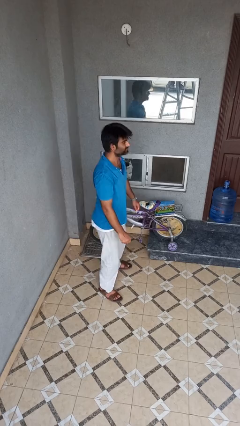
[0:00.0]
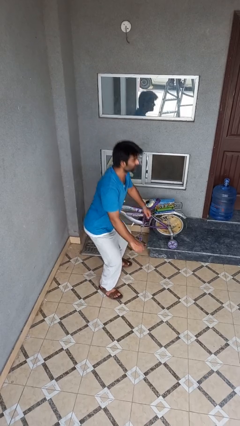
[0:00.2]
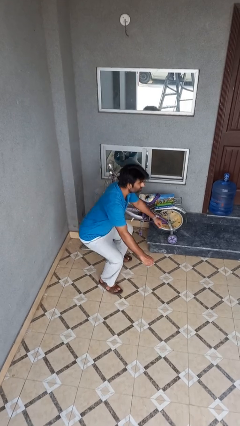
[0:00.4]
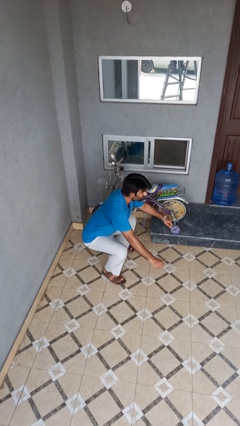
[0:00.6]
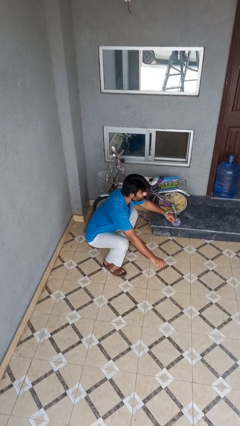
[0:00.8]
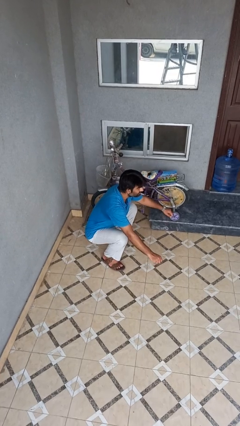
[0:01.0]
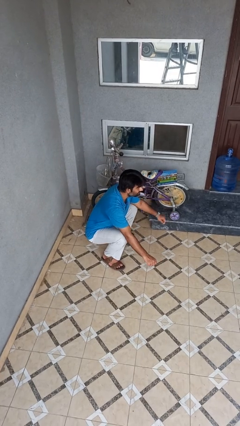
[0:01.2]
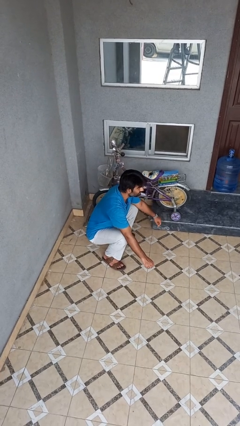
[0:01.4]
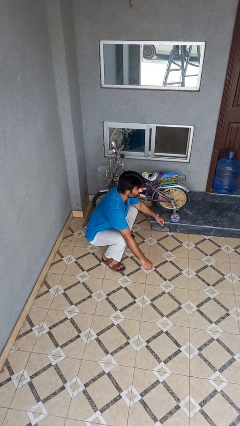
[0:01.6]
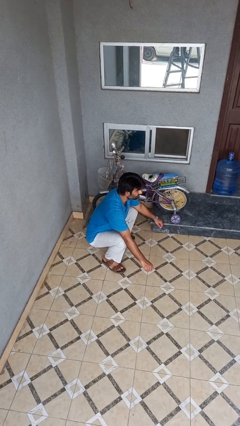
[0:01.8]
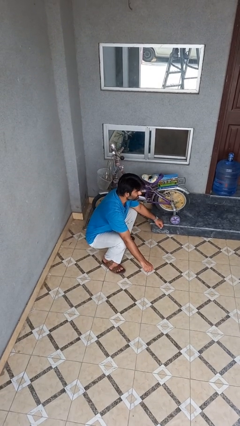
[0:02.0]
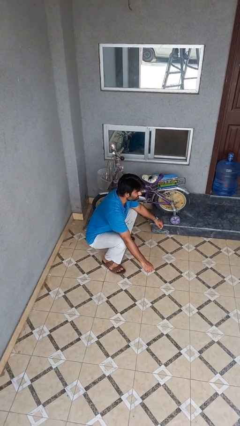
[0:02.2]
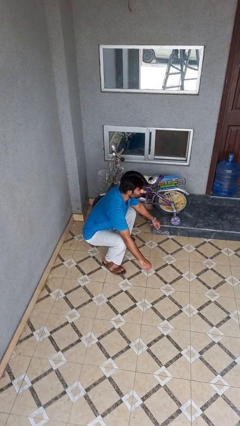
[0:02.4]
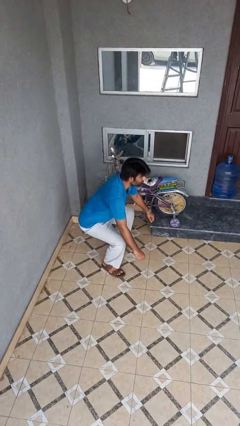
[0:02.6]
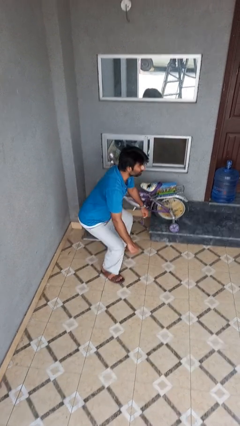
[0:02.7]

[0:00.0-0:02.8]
person squats

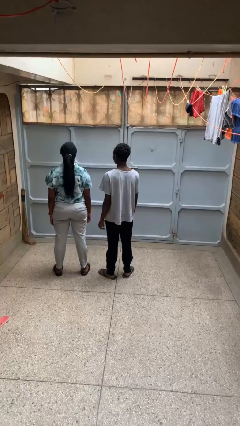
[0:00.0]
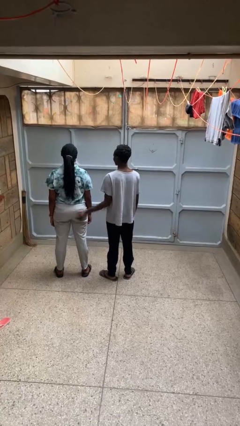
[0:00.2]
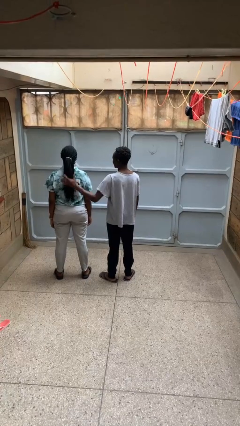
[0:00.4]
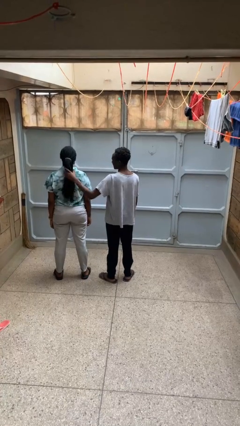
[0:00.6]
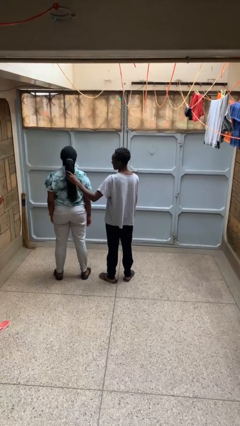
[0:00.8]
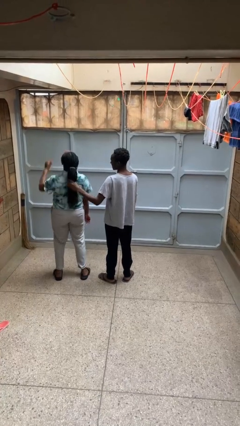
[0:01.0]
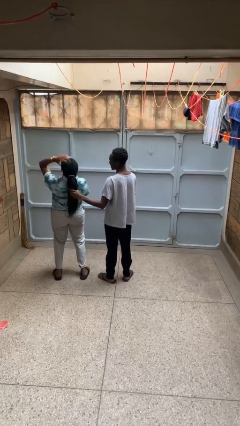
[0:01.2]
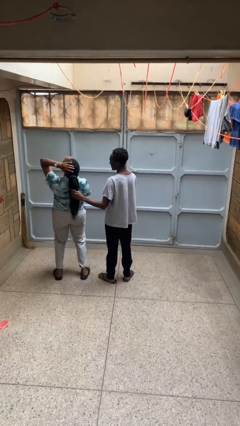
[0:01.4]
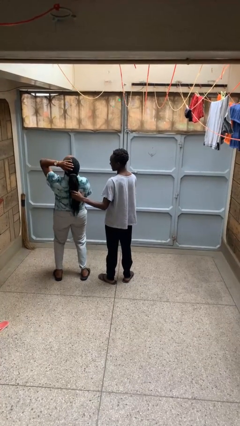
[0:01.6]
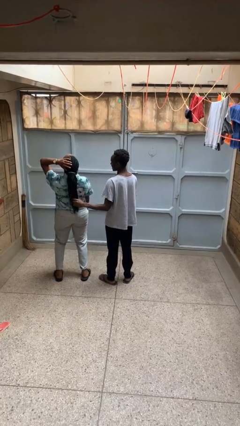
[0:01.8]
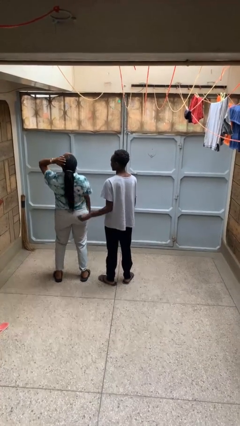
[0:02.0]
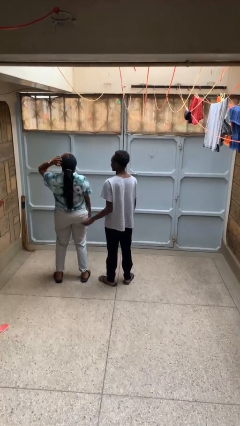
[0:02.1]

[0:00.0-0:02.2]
person grabs person by hair

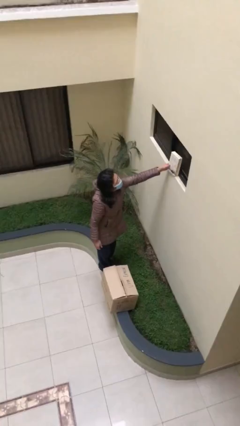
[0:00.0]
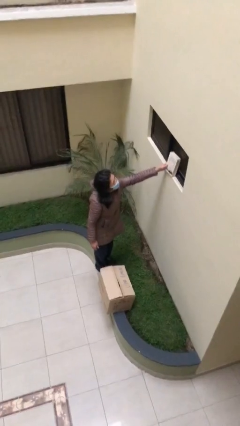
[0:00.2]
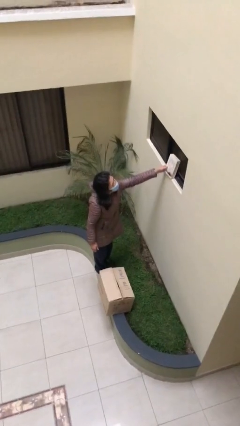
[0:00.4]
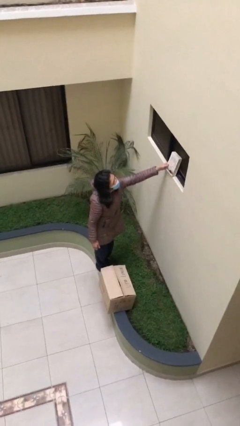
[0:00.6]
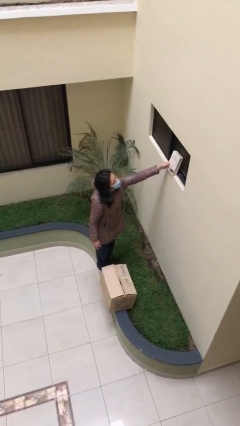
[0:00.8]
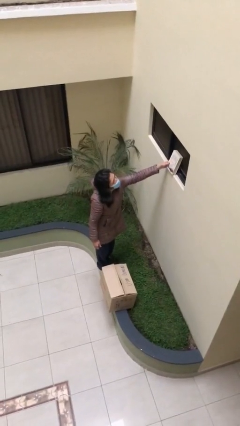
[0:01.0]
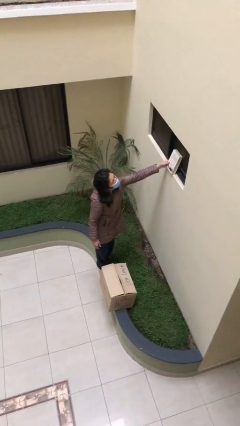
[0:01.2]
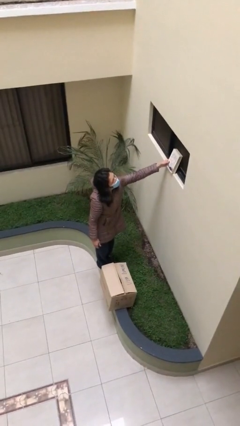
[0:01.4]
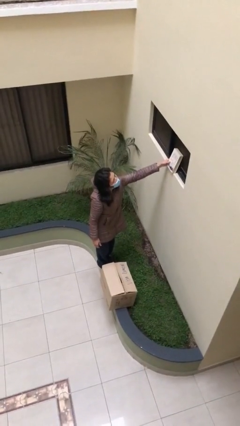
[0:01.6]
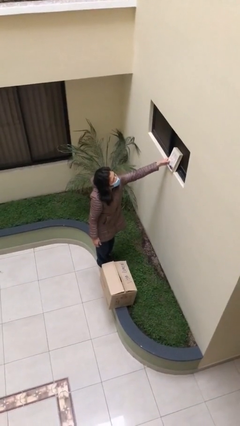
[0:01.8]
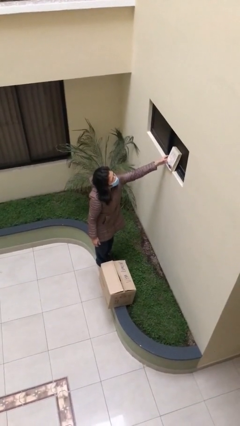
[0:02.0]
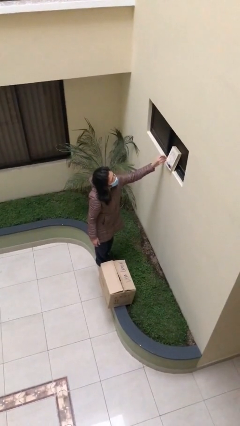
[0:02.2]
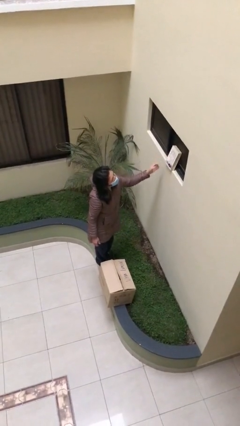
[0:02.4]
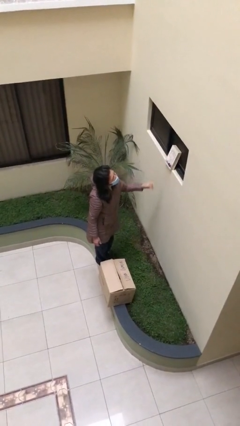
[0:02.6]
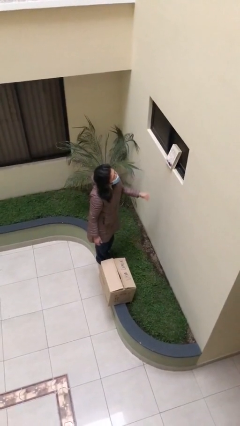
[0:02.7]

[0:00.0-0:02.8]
person puts down object on shelf

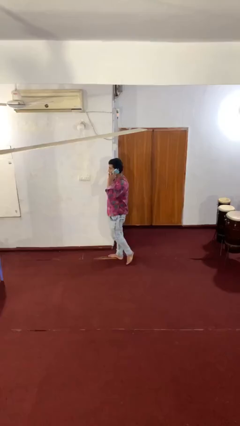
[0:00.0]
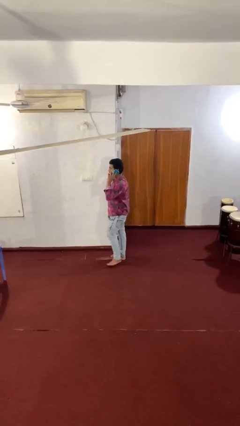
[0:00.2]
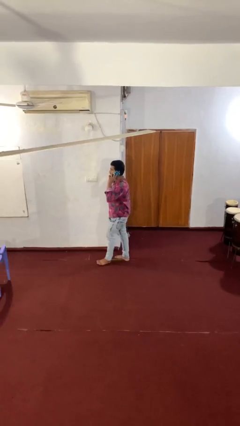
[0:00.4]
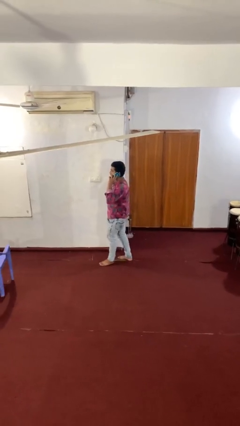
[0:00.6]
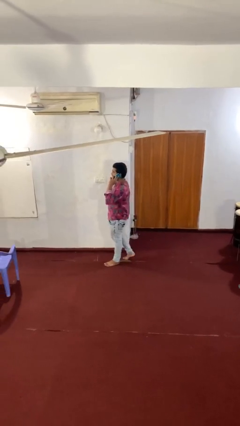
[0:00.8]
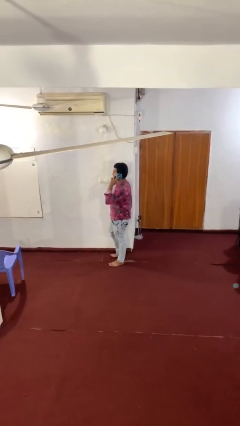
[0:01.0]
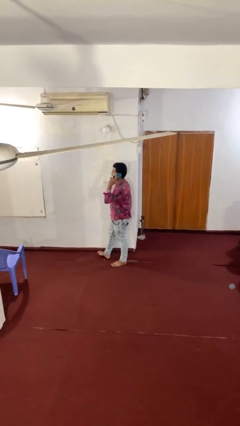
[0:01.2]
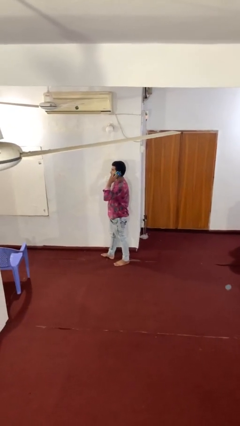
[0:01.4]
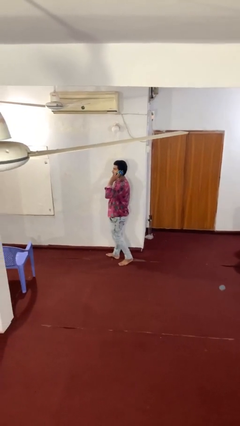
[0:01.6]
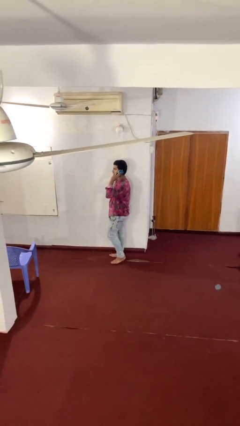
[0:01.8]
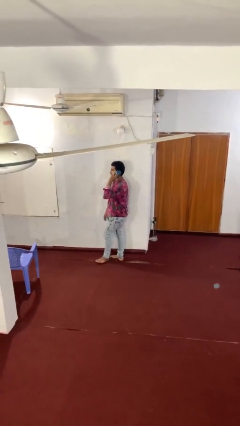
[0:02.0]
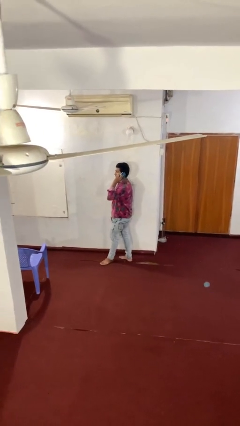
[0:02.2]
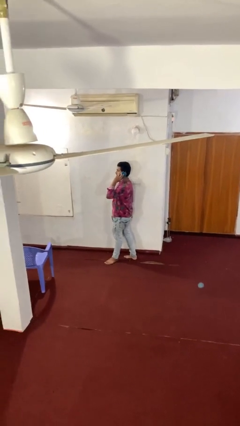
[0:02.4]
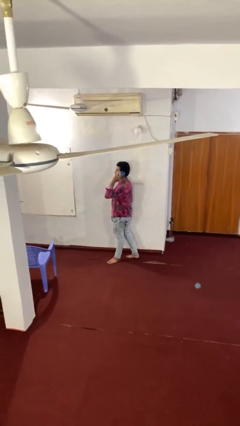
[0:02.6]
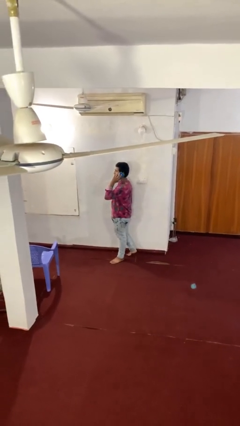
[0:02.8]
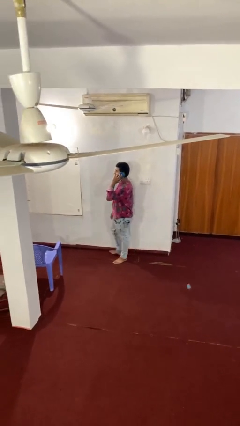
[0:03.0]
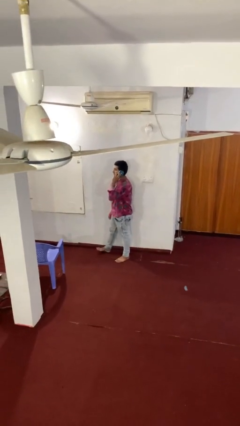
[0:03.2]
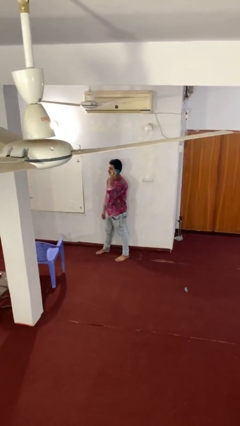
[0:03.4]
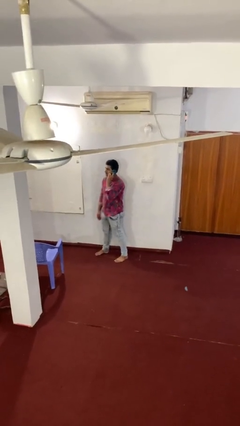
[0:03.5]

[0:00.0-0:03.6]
person talks on phone

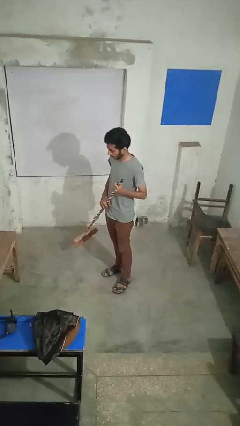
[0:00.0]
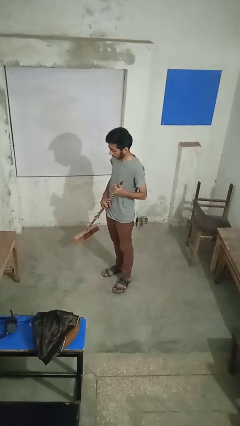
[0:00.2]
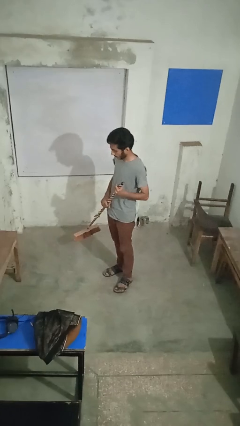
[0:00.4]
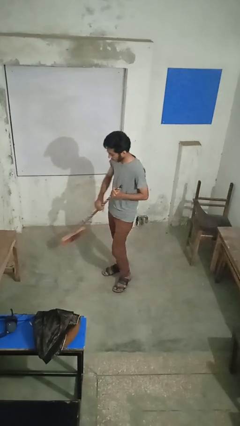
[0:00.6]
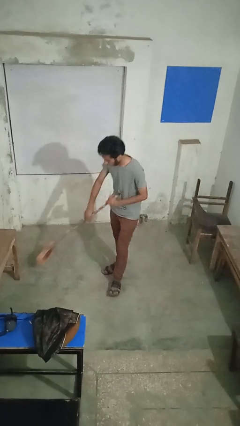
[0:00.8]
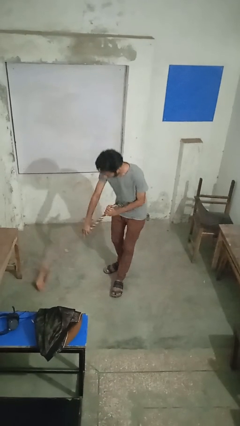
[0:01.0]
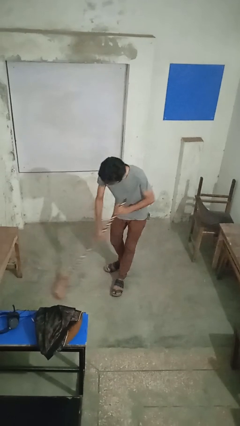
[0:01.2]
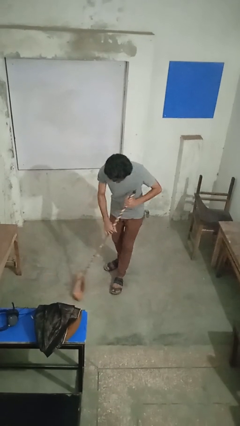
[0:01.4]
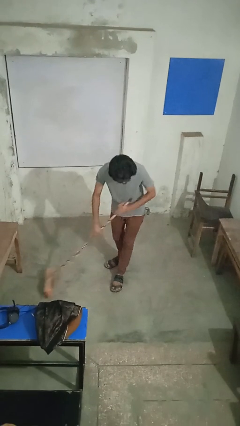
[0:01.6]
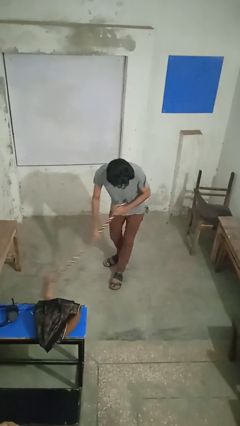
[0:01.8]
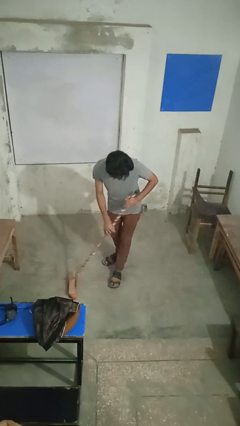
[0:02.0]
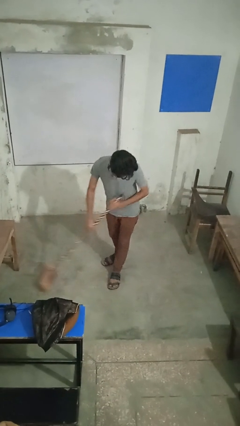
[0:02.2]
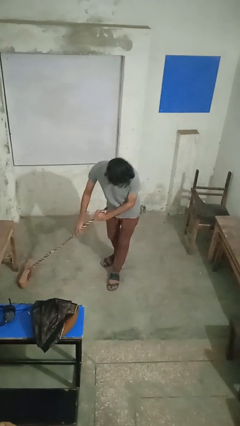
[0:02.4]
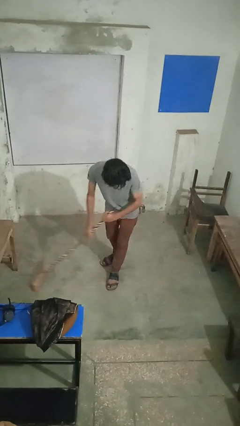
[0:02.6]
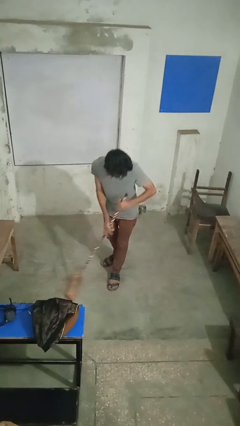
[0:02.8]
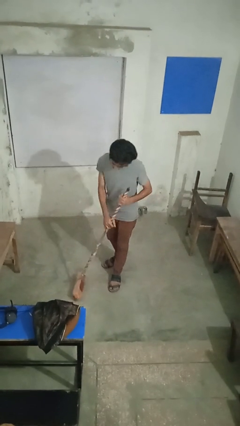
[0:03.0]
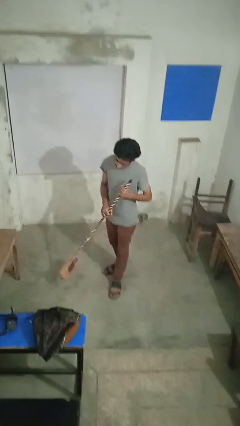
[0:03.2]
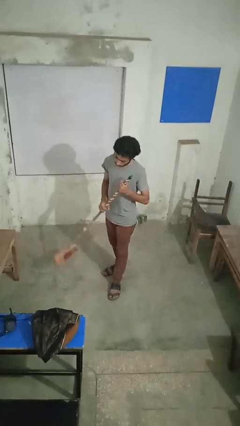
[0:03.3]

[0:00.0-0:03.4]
person sweeps floor

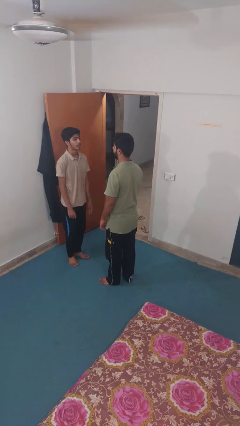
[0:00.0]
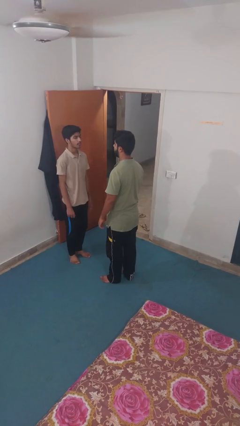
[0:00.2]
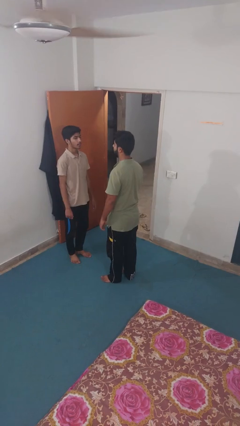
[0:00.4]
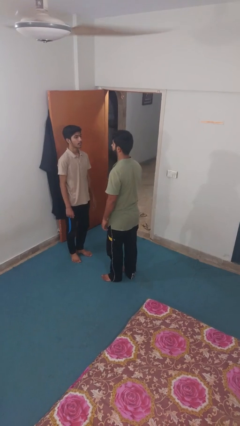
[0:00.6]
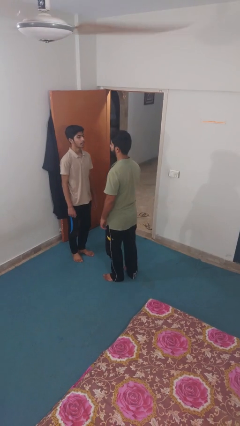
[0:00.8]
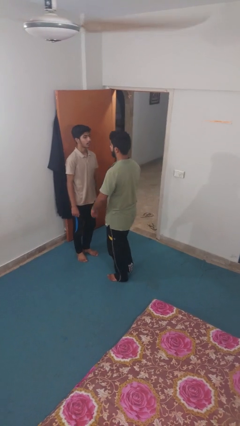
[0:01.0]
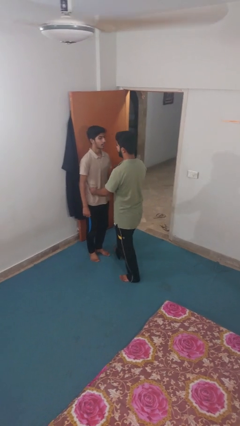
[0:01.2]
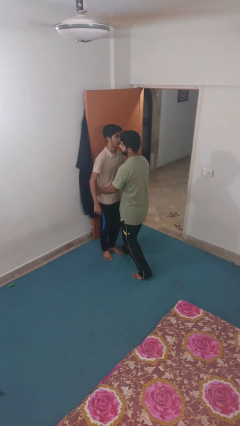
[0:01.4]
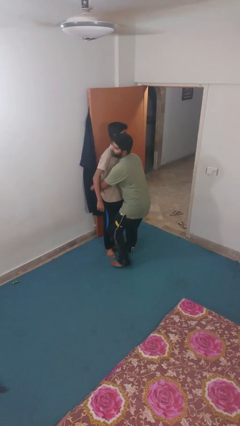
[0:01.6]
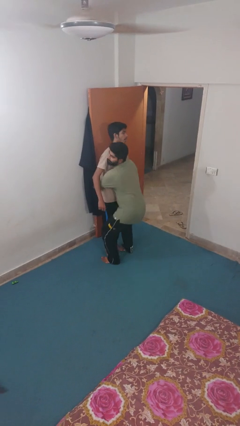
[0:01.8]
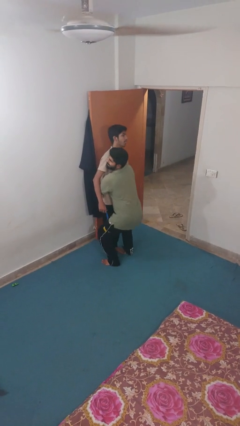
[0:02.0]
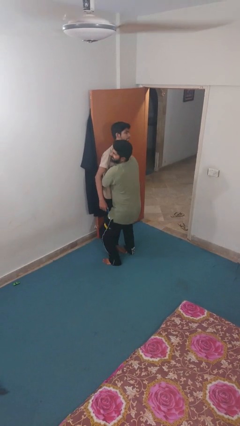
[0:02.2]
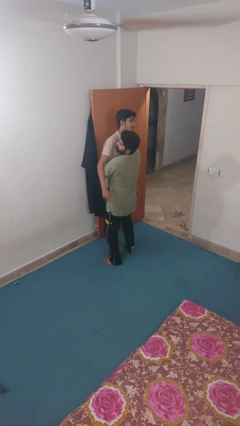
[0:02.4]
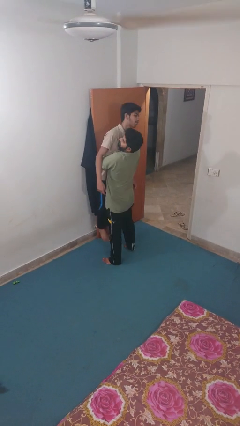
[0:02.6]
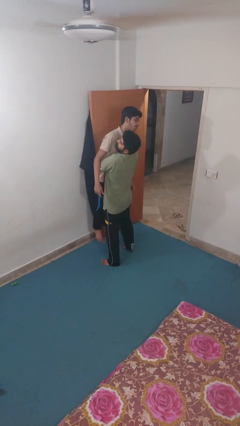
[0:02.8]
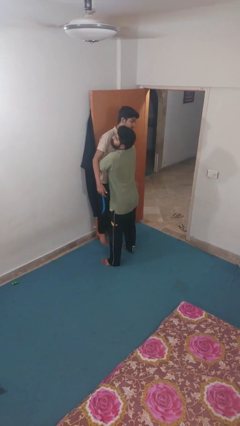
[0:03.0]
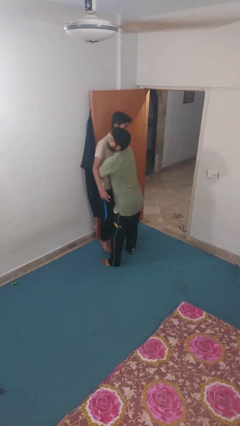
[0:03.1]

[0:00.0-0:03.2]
person picks up person
